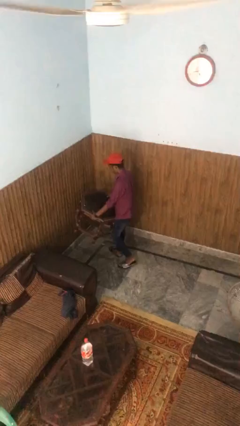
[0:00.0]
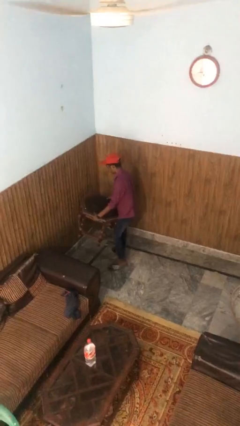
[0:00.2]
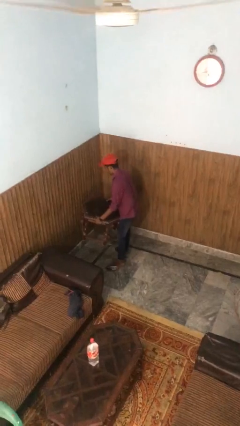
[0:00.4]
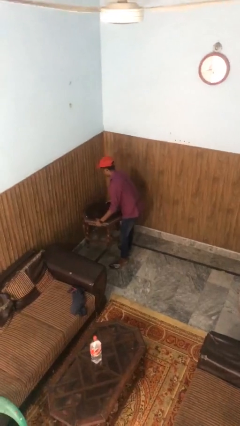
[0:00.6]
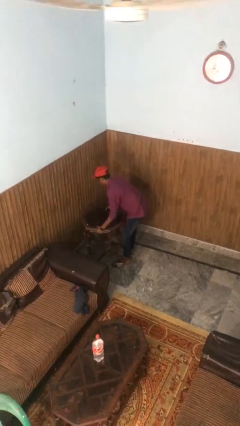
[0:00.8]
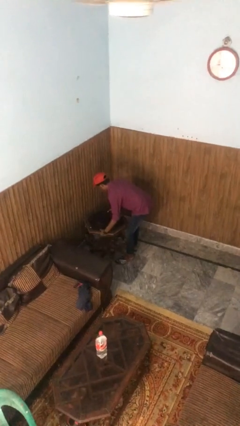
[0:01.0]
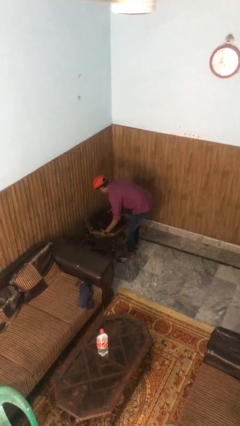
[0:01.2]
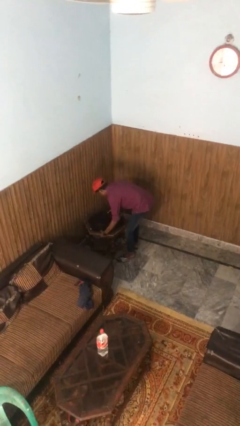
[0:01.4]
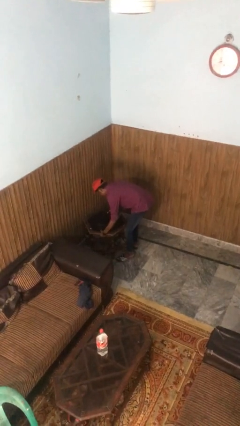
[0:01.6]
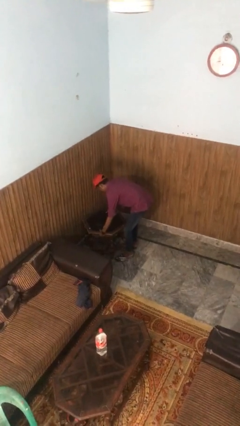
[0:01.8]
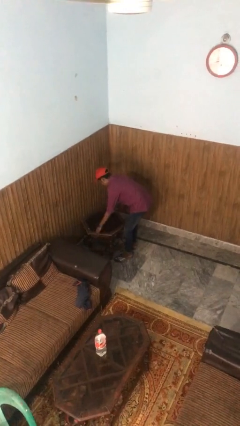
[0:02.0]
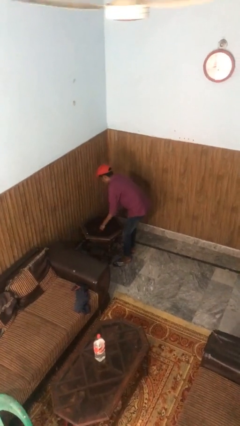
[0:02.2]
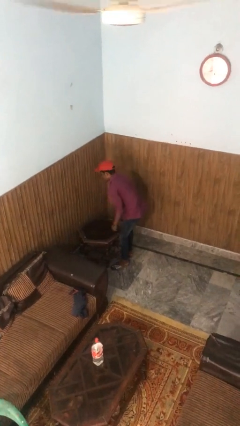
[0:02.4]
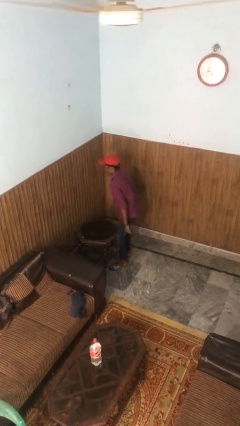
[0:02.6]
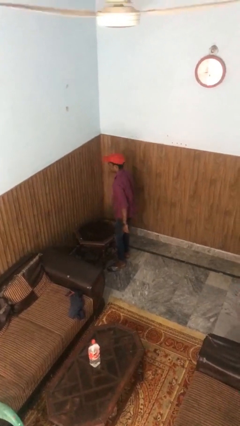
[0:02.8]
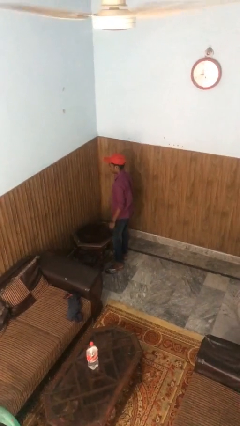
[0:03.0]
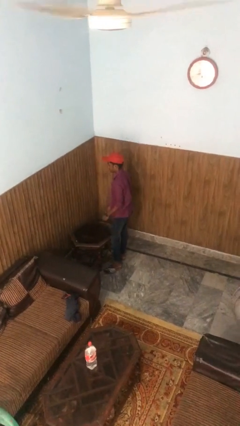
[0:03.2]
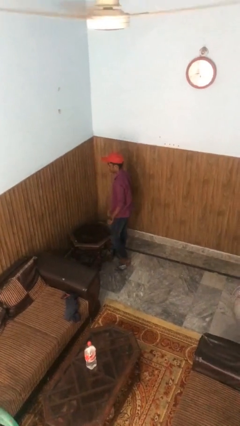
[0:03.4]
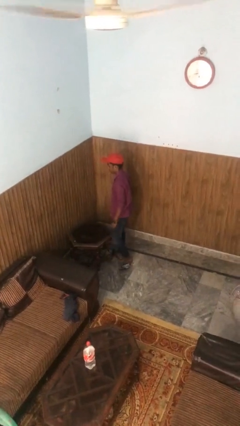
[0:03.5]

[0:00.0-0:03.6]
person puts down object on floor

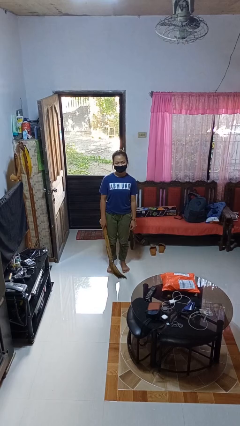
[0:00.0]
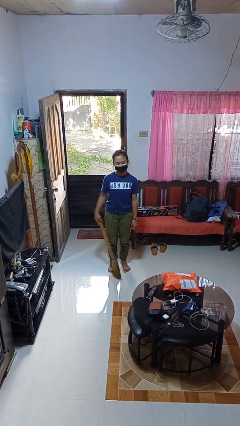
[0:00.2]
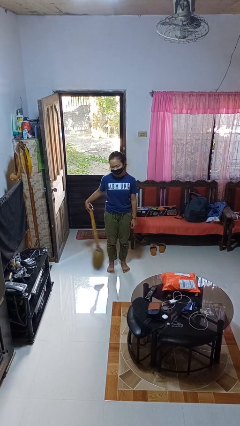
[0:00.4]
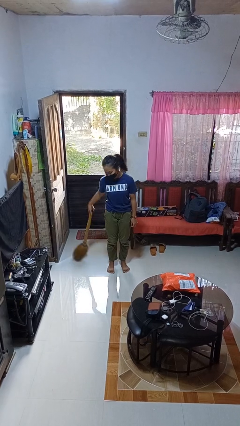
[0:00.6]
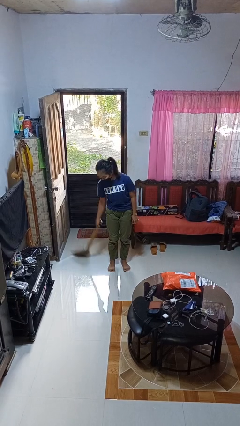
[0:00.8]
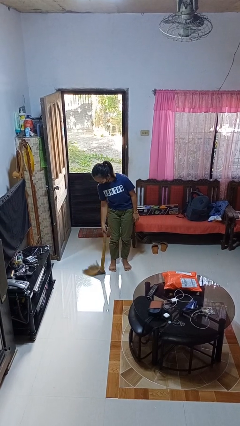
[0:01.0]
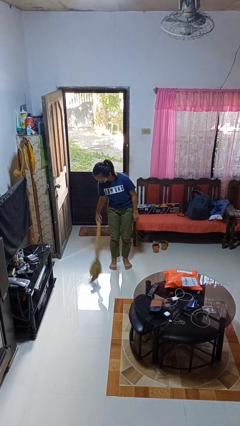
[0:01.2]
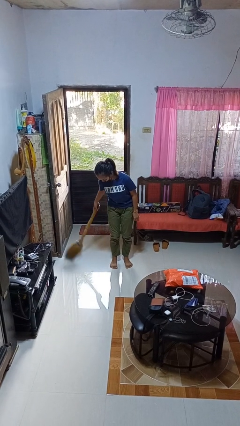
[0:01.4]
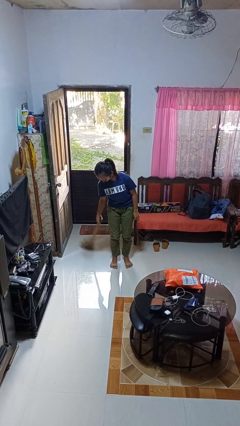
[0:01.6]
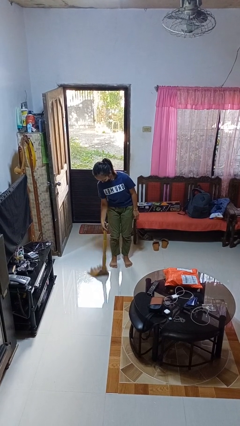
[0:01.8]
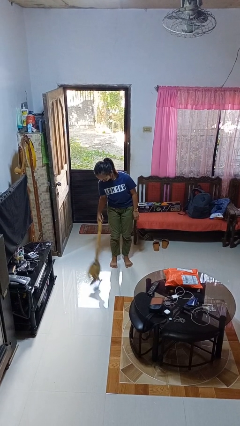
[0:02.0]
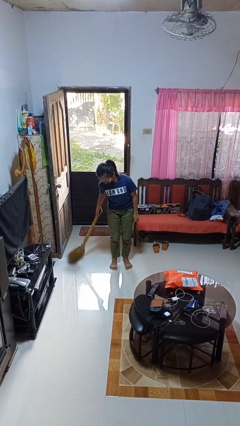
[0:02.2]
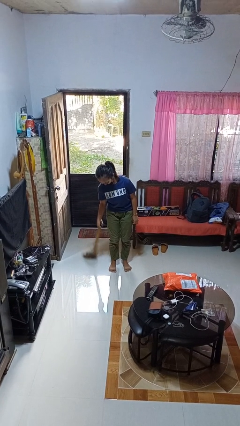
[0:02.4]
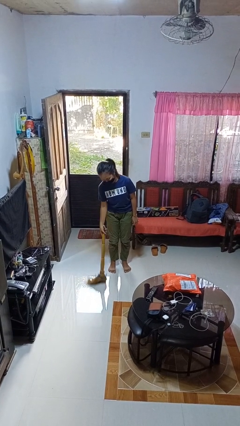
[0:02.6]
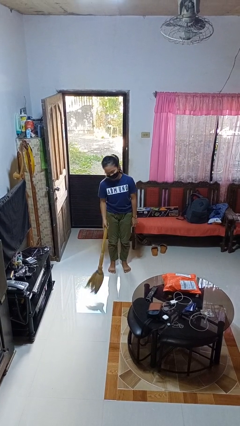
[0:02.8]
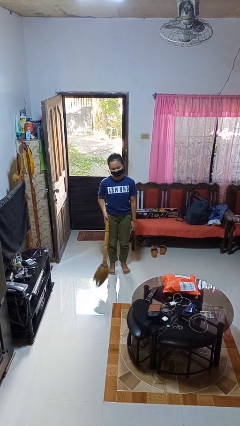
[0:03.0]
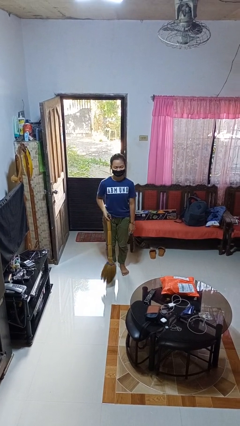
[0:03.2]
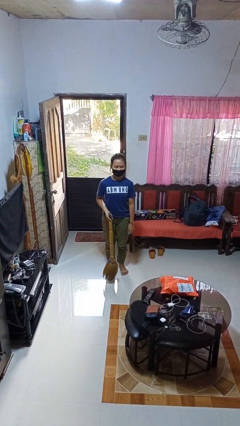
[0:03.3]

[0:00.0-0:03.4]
person sweeps floor

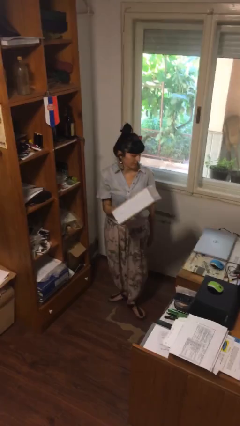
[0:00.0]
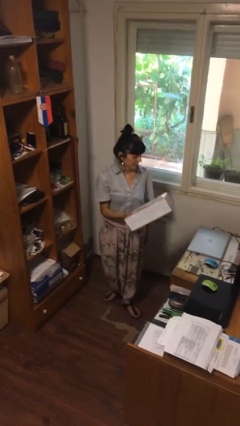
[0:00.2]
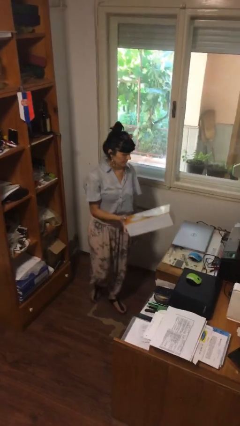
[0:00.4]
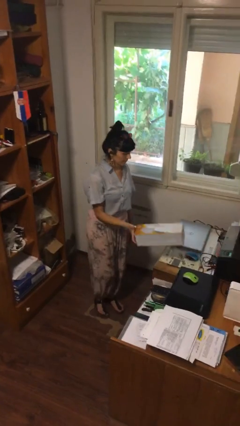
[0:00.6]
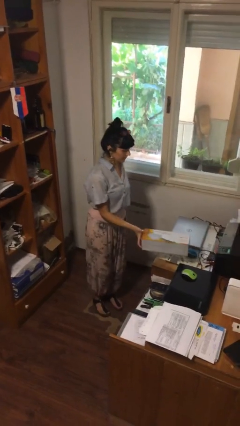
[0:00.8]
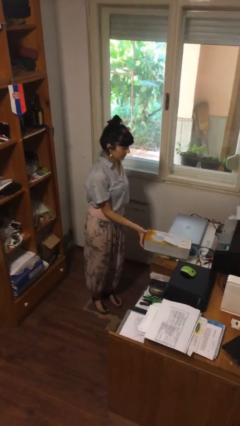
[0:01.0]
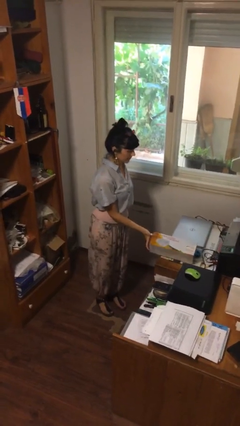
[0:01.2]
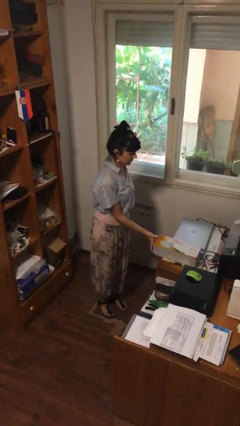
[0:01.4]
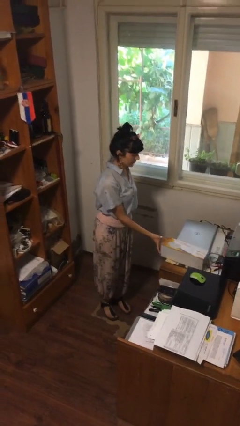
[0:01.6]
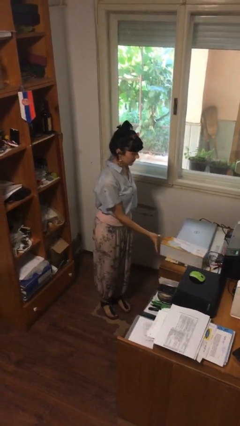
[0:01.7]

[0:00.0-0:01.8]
person puts down object on table

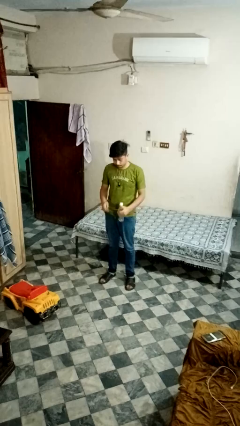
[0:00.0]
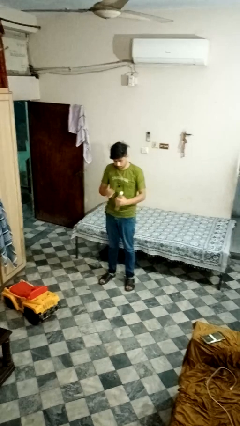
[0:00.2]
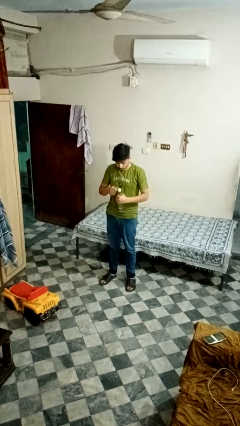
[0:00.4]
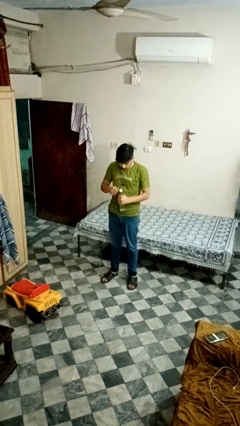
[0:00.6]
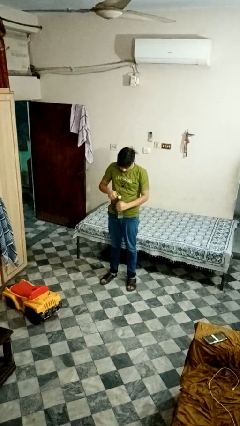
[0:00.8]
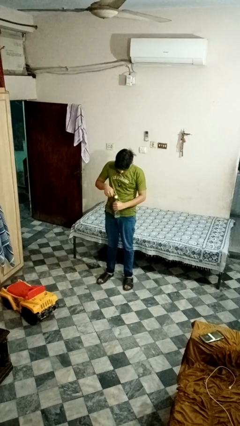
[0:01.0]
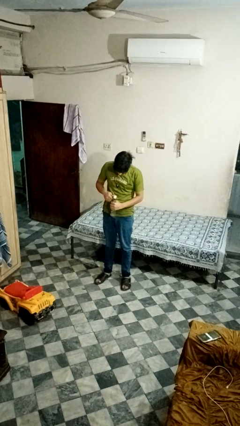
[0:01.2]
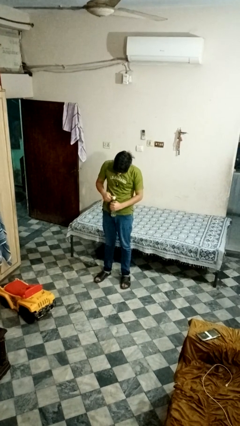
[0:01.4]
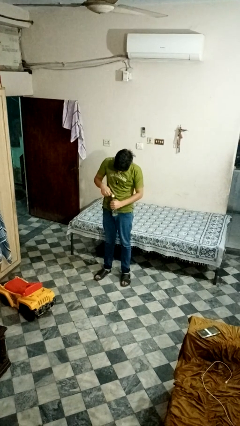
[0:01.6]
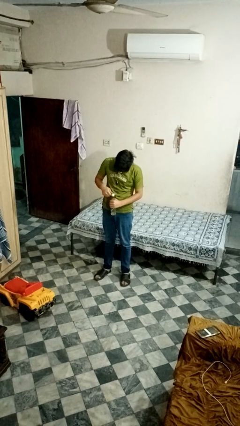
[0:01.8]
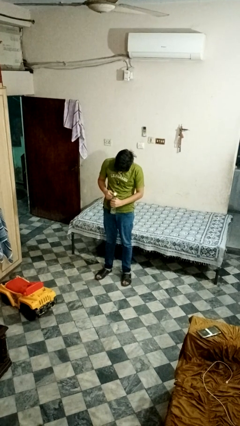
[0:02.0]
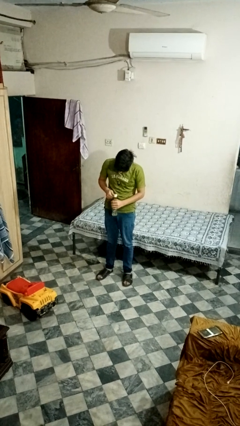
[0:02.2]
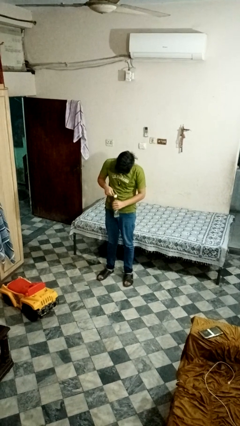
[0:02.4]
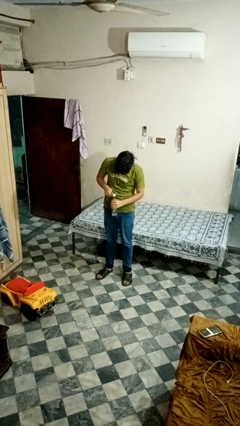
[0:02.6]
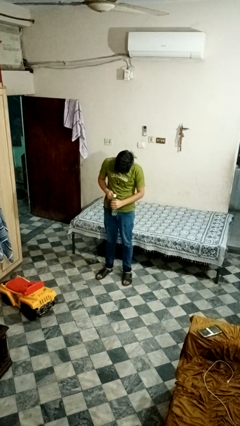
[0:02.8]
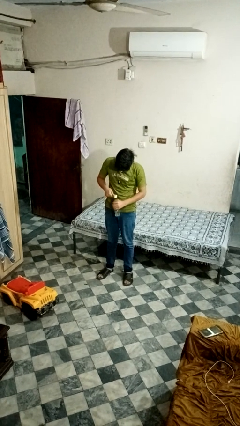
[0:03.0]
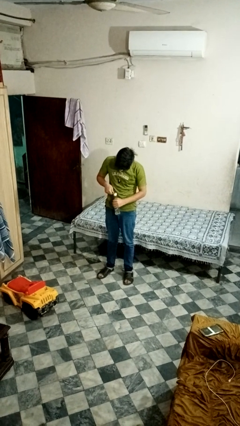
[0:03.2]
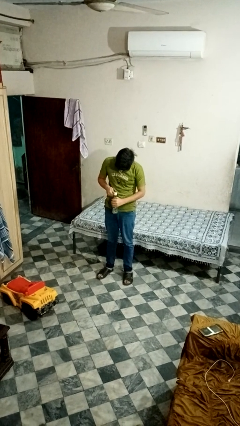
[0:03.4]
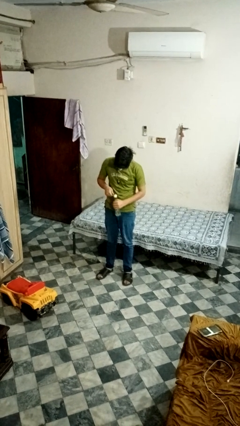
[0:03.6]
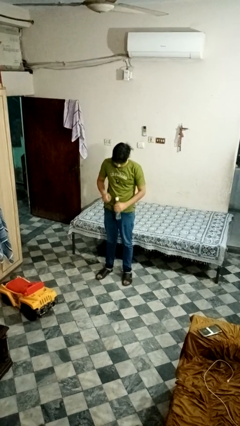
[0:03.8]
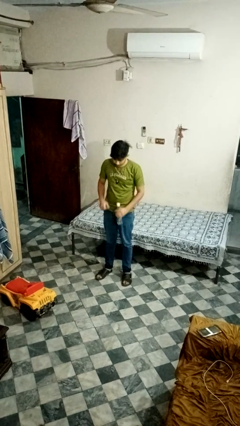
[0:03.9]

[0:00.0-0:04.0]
person opens can with can opener

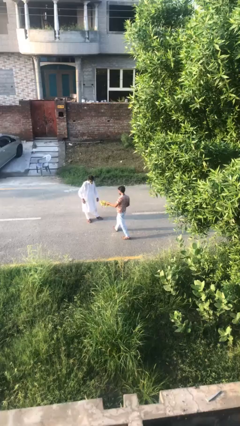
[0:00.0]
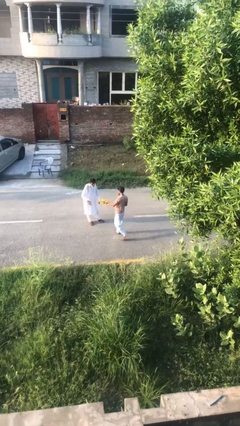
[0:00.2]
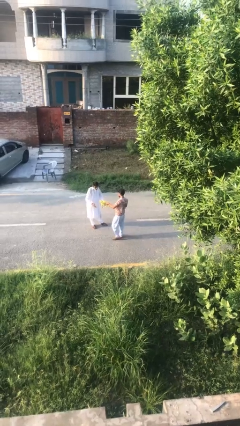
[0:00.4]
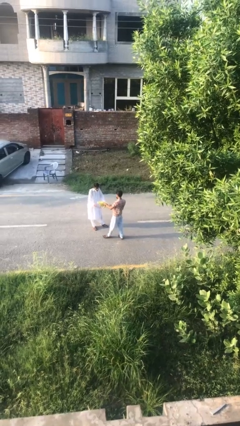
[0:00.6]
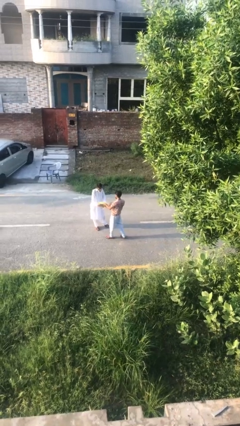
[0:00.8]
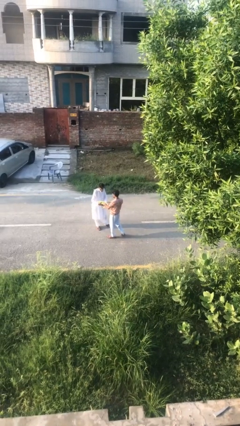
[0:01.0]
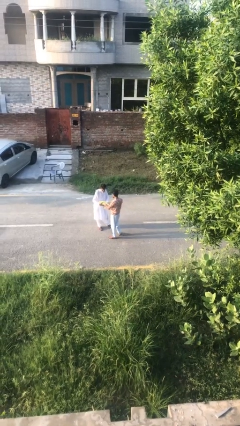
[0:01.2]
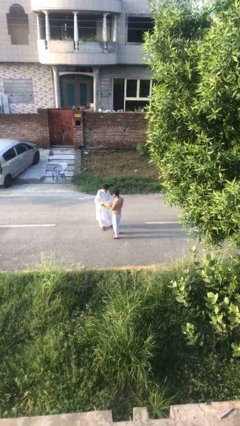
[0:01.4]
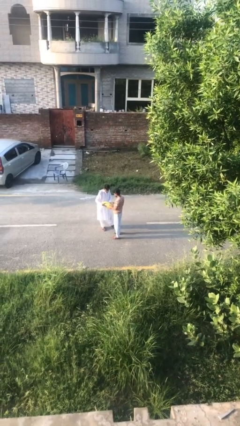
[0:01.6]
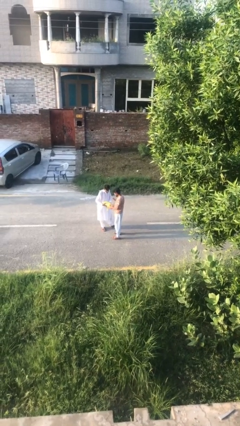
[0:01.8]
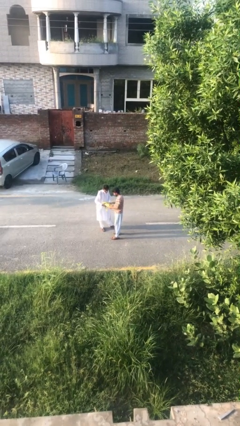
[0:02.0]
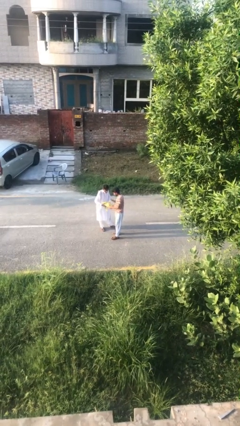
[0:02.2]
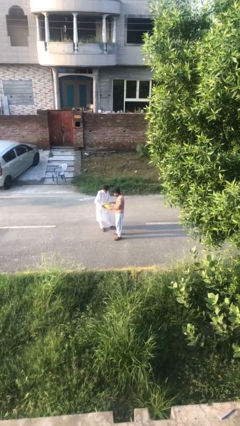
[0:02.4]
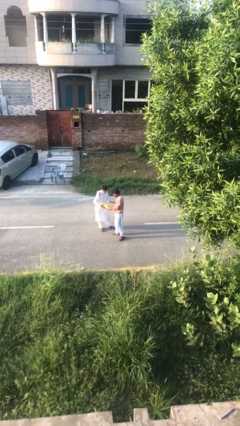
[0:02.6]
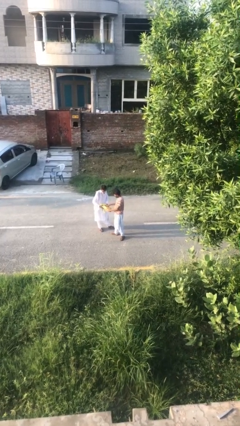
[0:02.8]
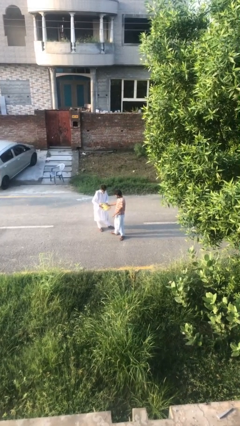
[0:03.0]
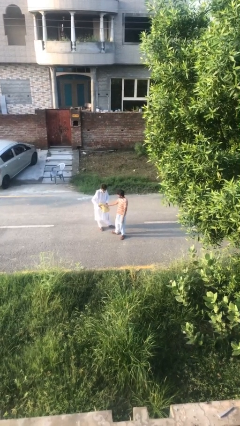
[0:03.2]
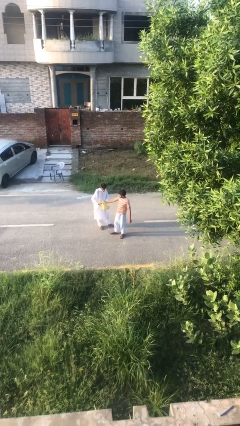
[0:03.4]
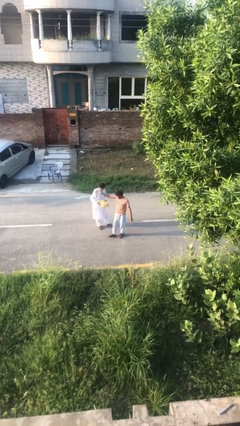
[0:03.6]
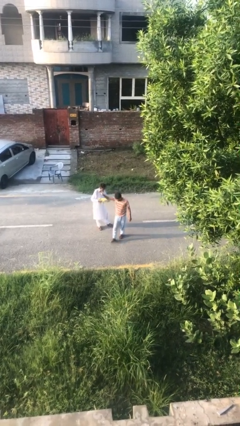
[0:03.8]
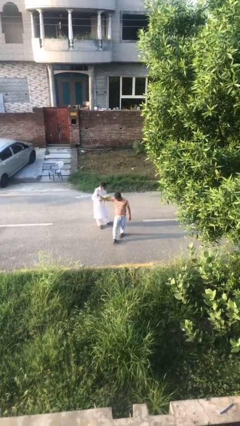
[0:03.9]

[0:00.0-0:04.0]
person transfers object to person

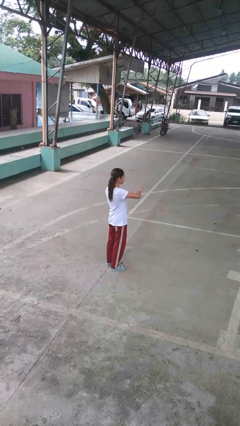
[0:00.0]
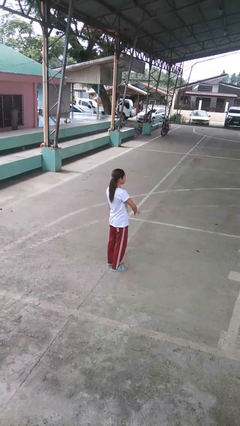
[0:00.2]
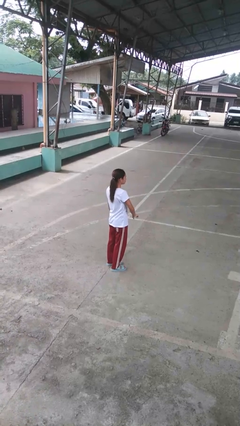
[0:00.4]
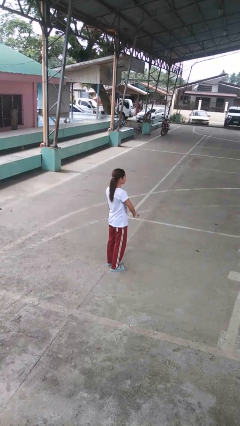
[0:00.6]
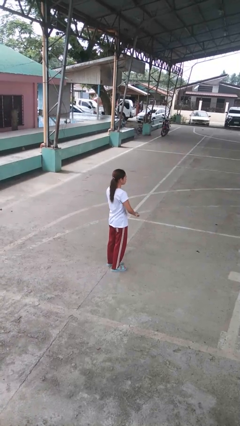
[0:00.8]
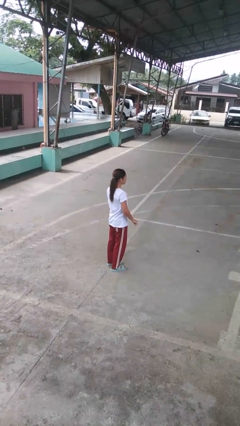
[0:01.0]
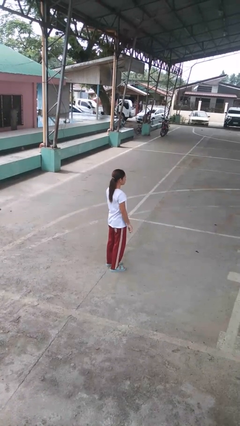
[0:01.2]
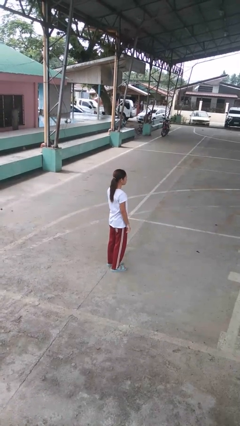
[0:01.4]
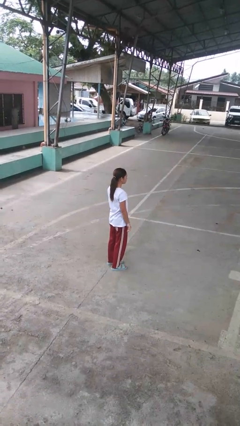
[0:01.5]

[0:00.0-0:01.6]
person gestures swipe down
